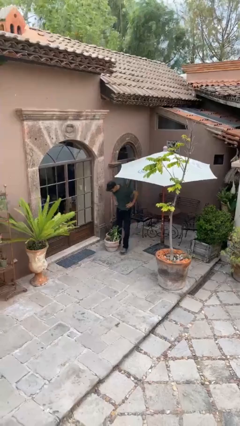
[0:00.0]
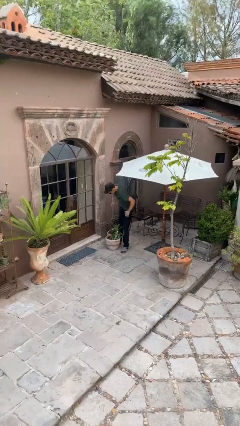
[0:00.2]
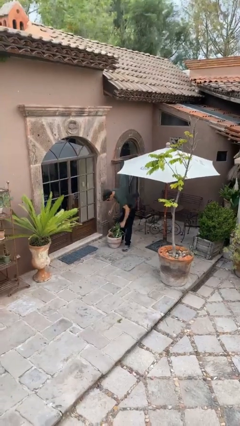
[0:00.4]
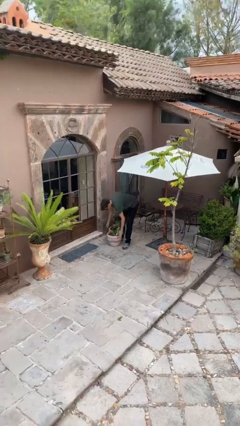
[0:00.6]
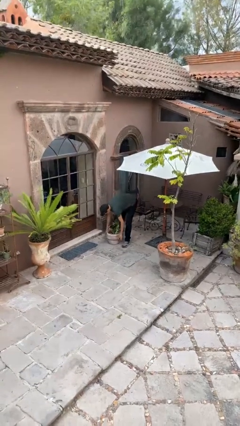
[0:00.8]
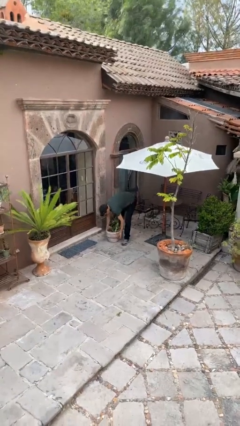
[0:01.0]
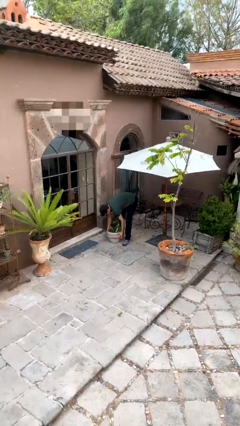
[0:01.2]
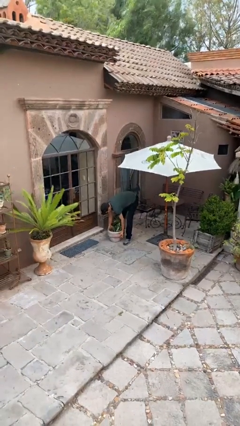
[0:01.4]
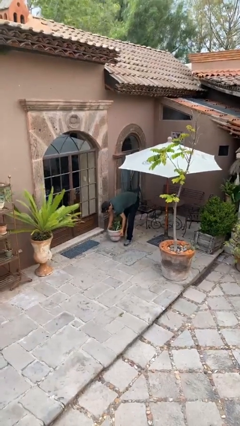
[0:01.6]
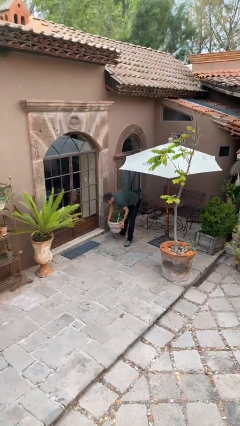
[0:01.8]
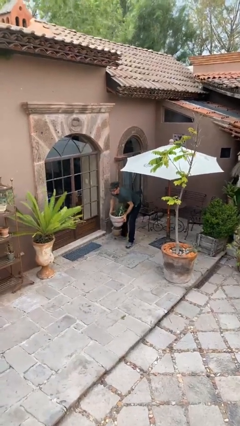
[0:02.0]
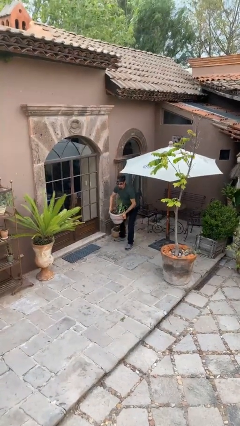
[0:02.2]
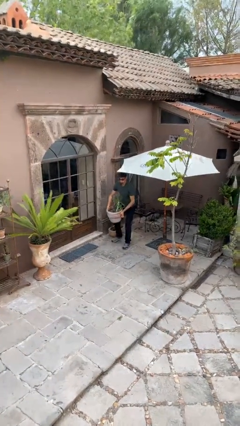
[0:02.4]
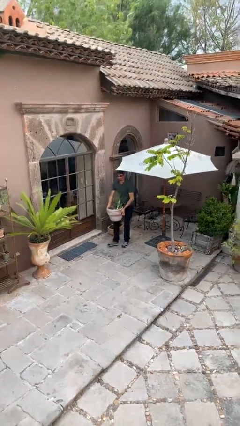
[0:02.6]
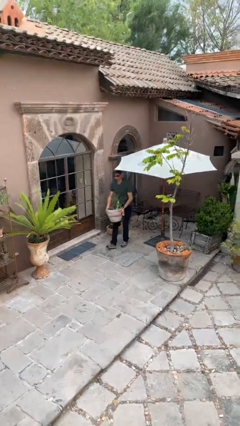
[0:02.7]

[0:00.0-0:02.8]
person picks up object from floor

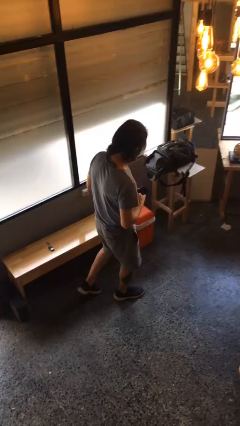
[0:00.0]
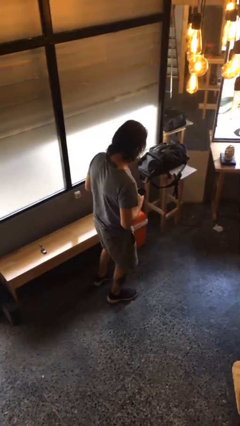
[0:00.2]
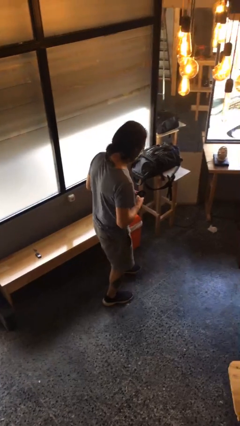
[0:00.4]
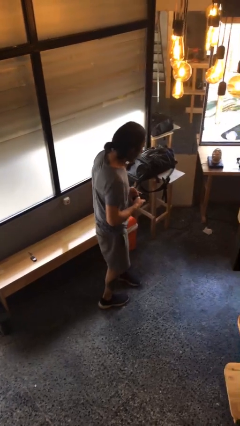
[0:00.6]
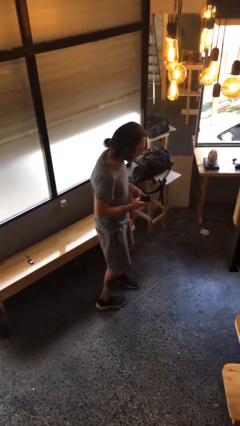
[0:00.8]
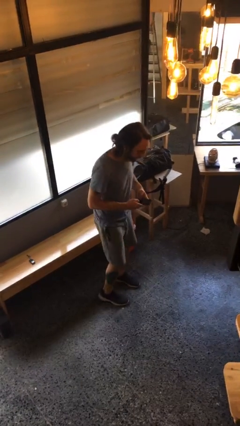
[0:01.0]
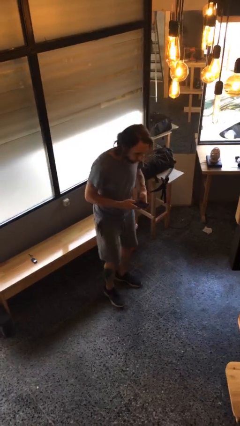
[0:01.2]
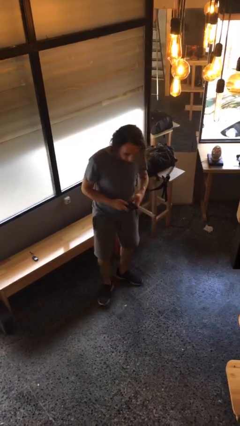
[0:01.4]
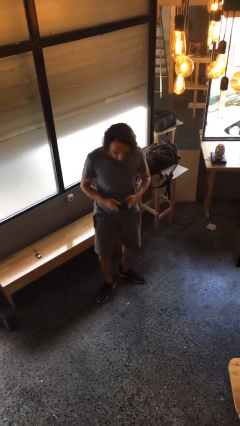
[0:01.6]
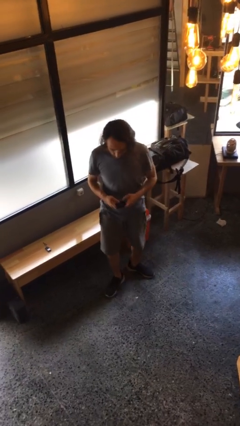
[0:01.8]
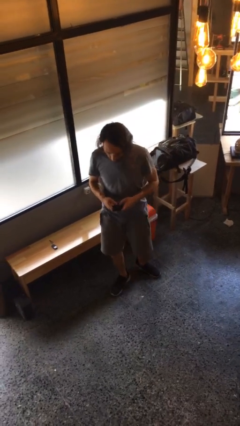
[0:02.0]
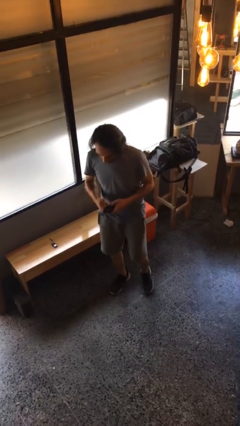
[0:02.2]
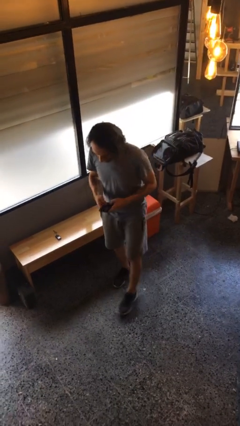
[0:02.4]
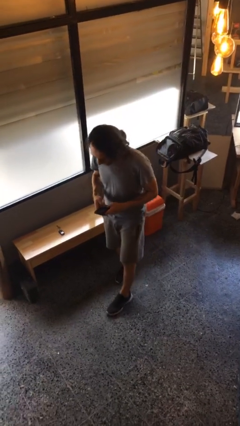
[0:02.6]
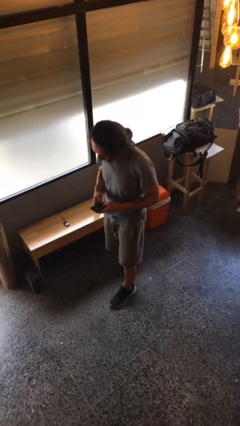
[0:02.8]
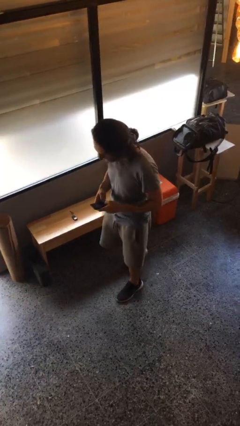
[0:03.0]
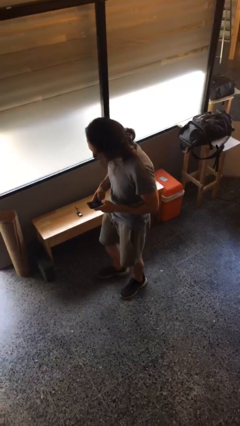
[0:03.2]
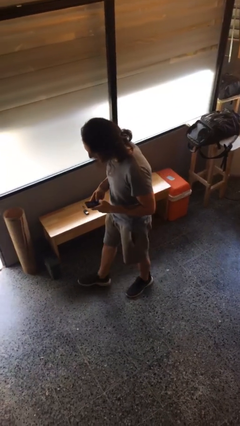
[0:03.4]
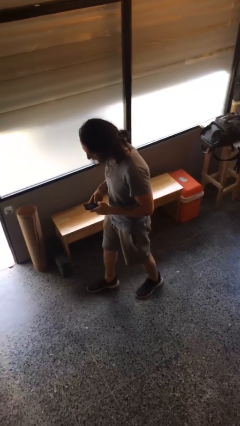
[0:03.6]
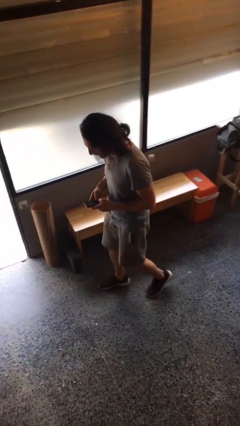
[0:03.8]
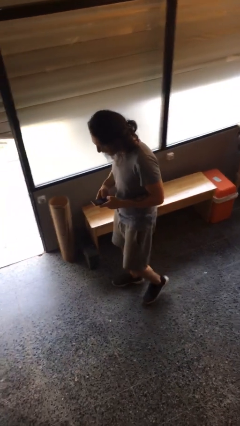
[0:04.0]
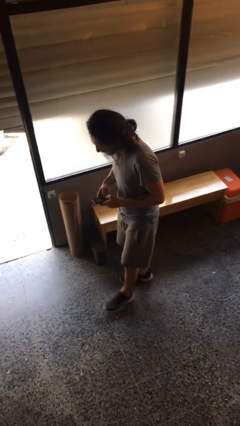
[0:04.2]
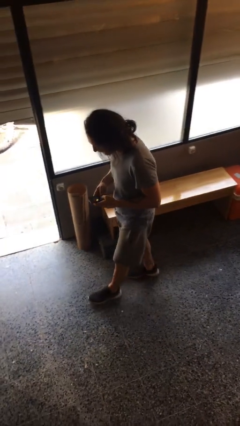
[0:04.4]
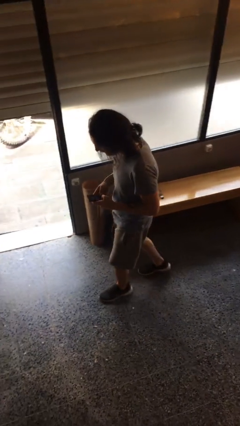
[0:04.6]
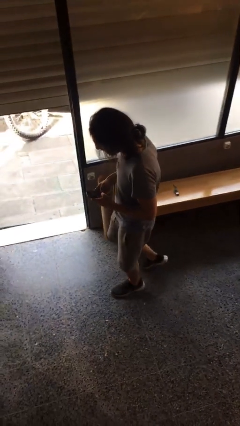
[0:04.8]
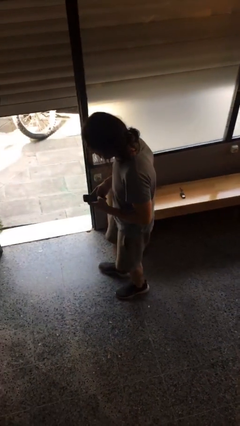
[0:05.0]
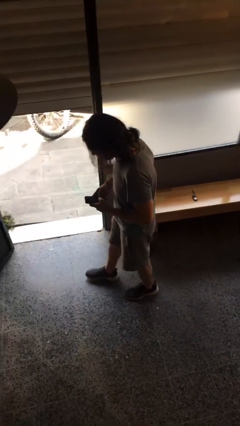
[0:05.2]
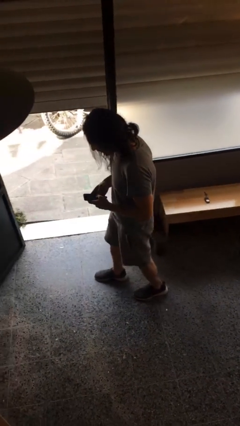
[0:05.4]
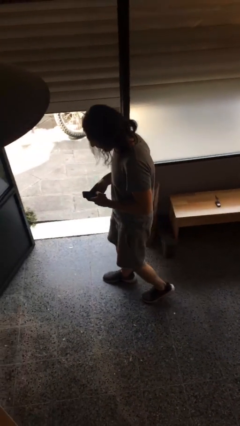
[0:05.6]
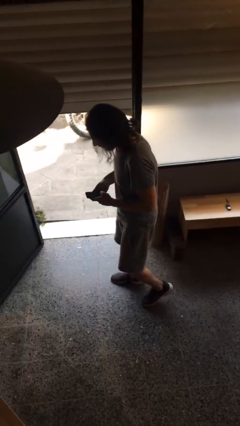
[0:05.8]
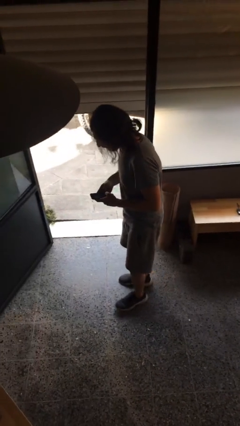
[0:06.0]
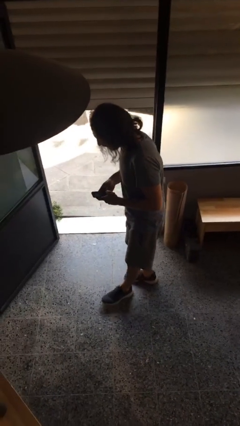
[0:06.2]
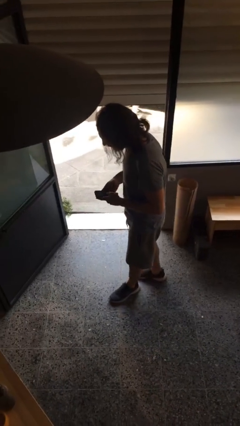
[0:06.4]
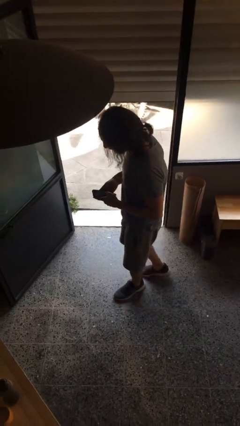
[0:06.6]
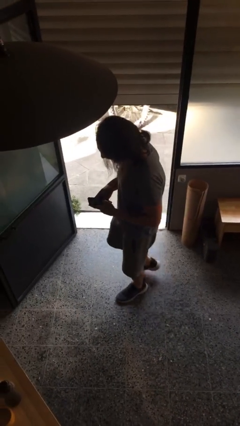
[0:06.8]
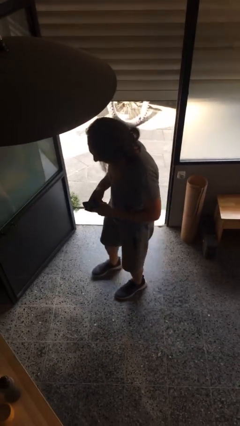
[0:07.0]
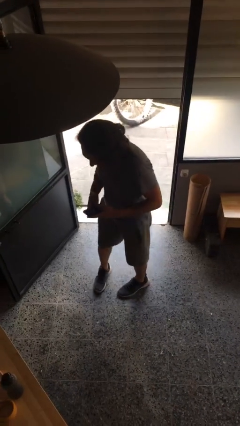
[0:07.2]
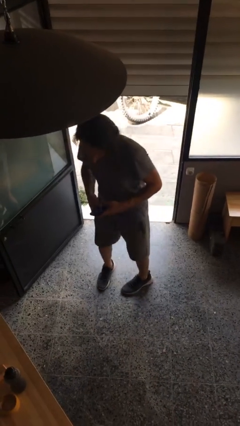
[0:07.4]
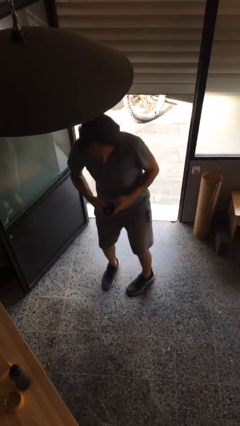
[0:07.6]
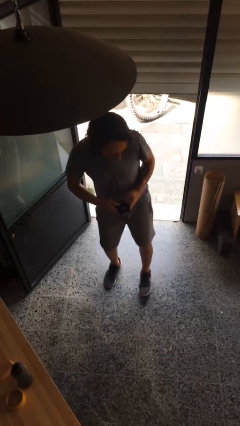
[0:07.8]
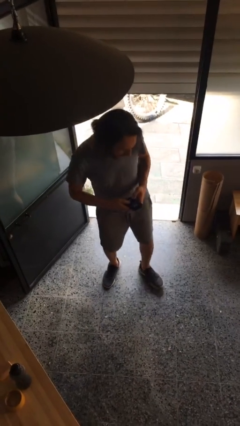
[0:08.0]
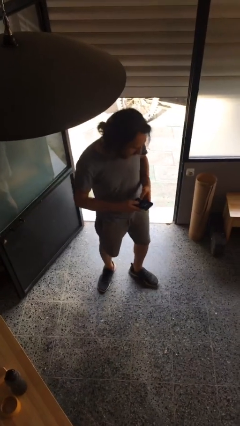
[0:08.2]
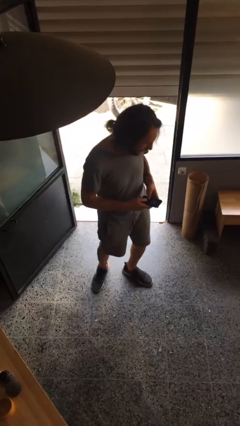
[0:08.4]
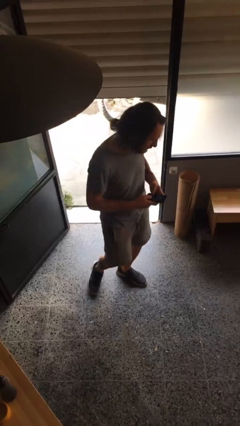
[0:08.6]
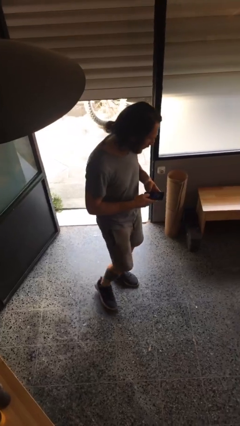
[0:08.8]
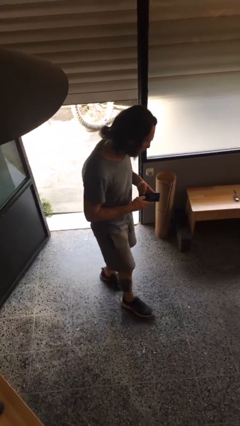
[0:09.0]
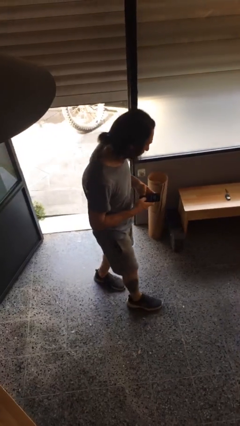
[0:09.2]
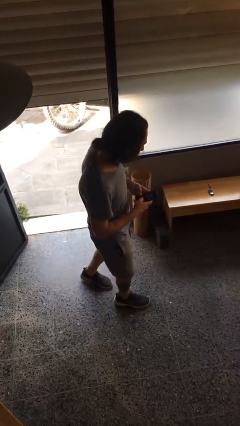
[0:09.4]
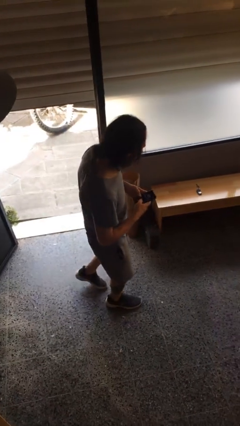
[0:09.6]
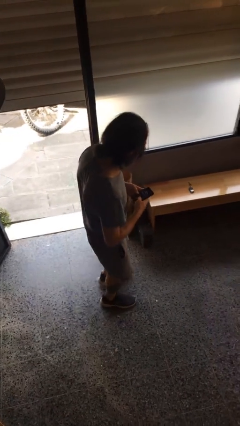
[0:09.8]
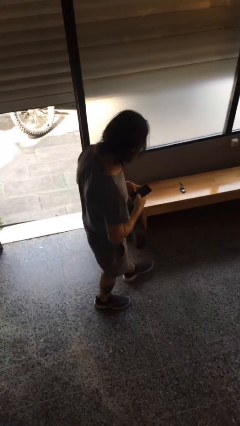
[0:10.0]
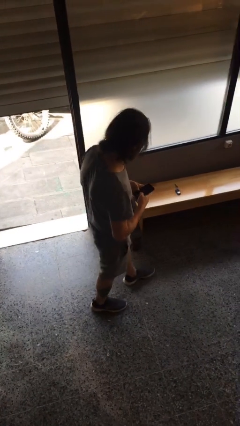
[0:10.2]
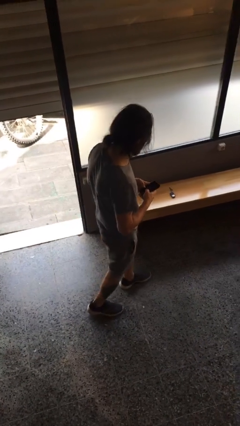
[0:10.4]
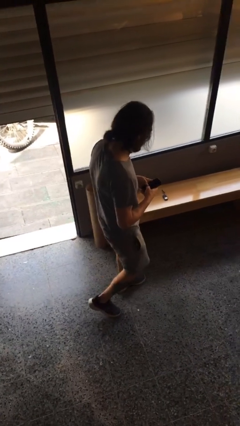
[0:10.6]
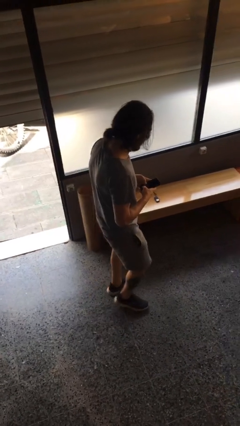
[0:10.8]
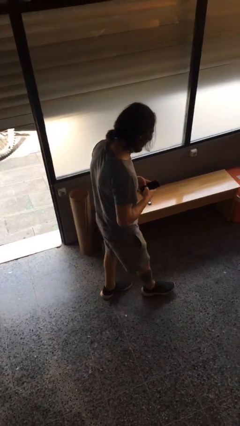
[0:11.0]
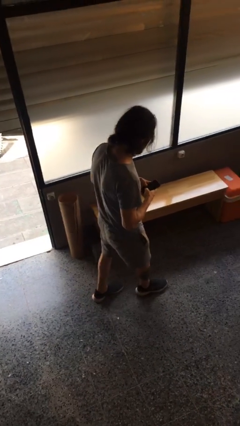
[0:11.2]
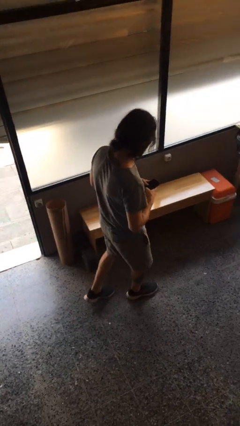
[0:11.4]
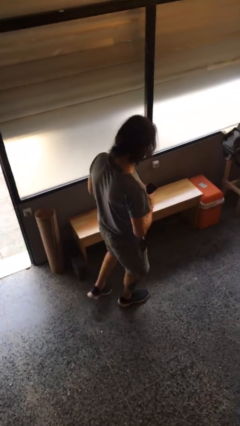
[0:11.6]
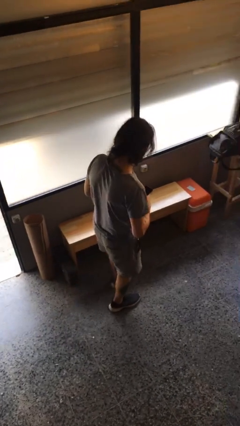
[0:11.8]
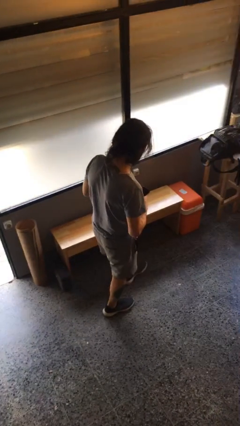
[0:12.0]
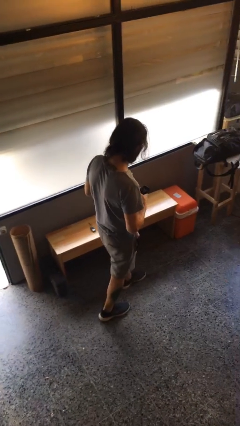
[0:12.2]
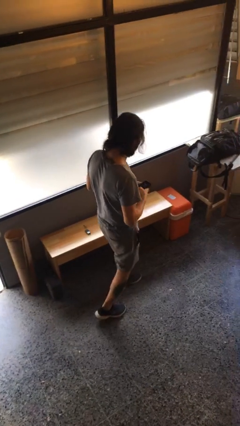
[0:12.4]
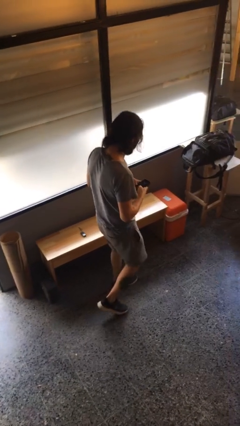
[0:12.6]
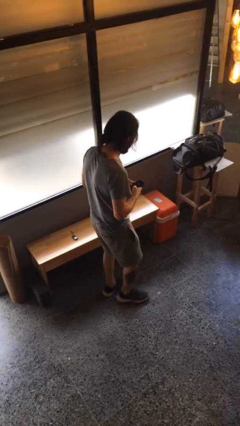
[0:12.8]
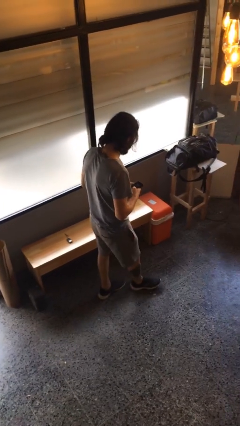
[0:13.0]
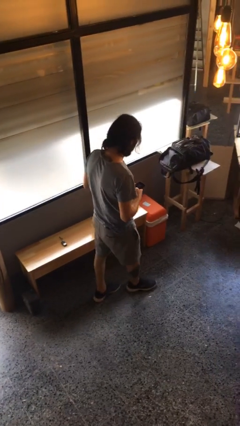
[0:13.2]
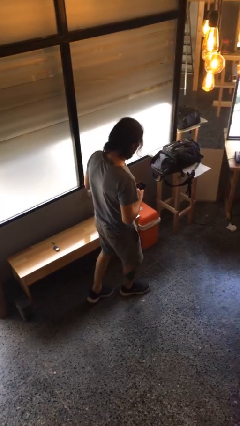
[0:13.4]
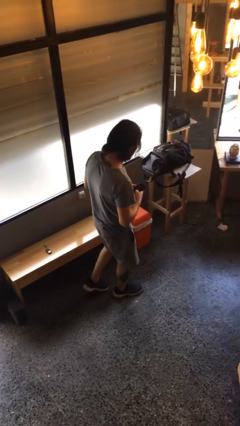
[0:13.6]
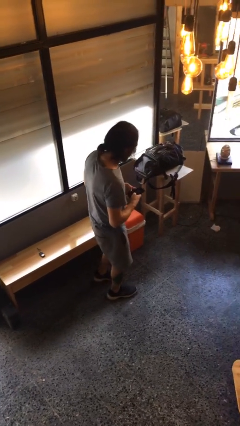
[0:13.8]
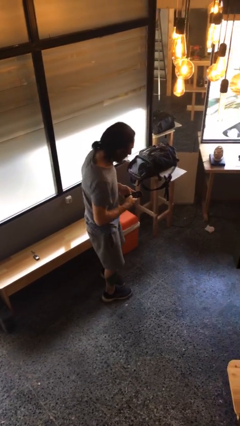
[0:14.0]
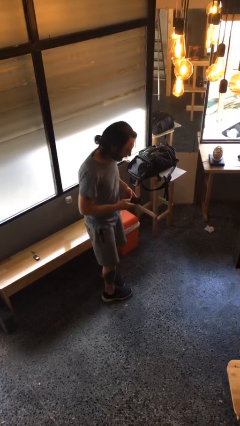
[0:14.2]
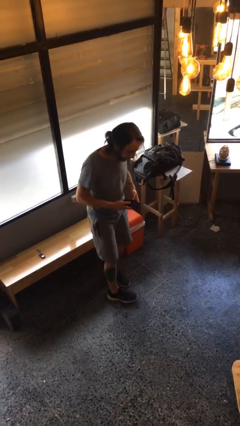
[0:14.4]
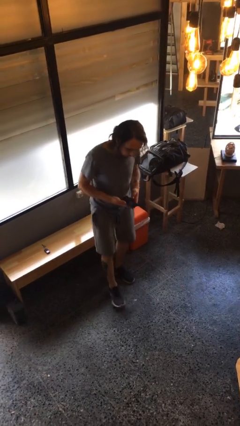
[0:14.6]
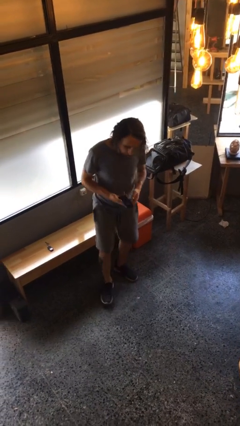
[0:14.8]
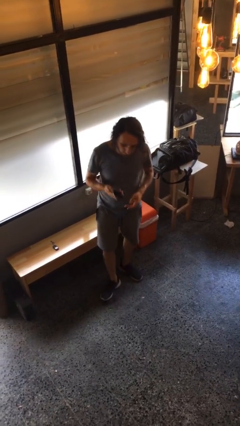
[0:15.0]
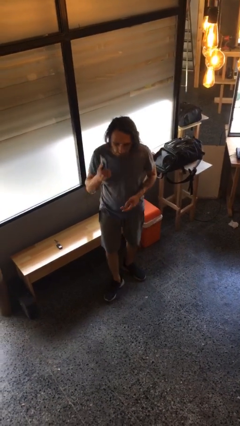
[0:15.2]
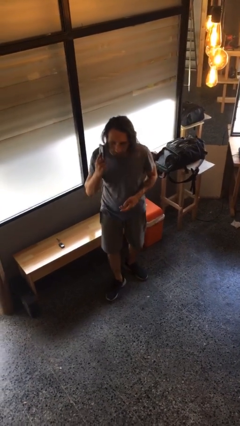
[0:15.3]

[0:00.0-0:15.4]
person texts on phone

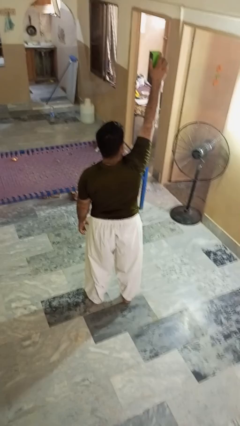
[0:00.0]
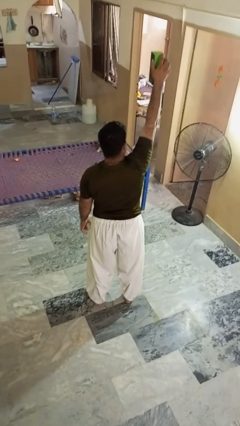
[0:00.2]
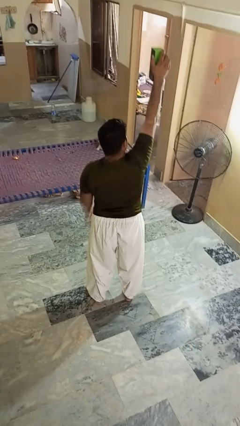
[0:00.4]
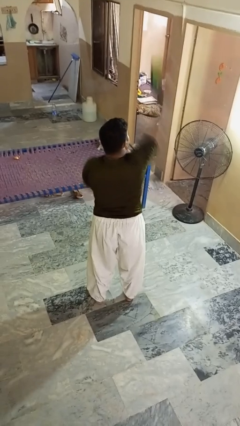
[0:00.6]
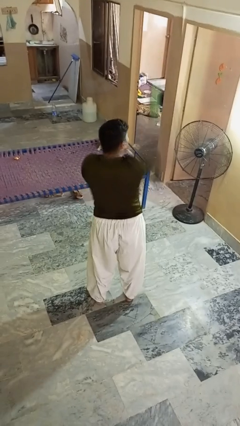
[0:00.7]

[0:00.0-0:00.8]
person drops object
